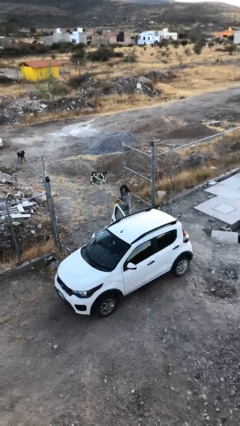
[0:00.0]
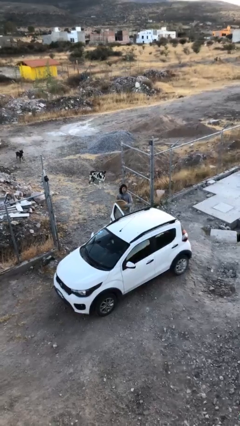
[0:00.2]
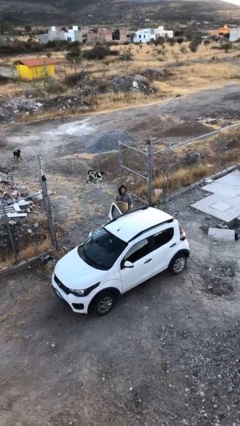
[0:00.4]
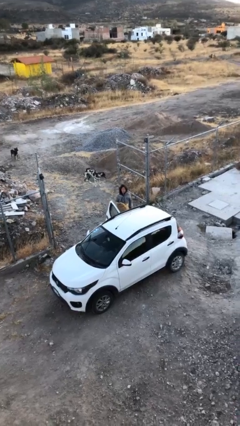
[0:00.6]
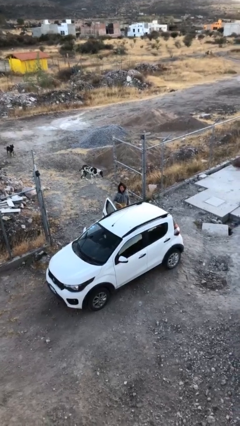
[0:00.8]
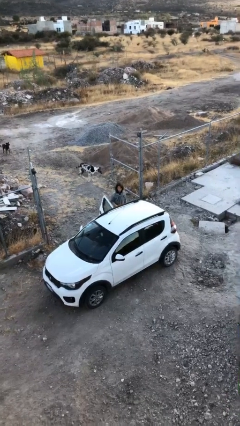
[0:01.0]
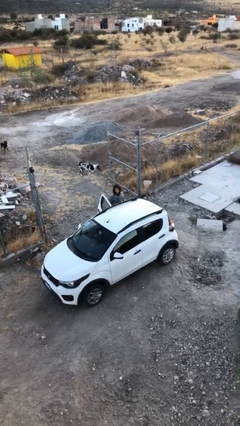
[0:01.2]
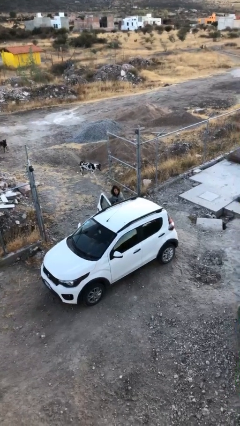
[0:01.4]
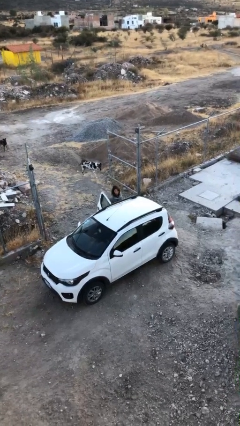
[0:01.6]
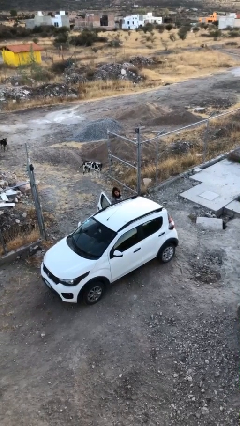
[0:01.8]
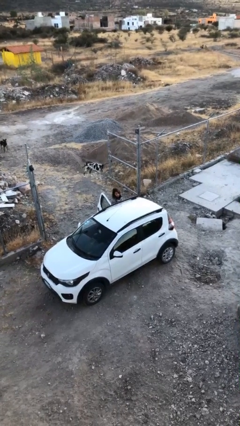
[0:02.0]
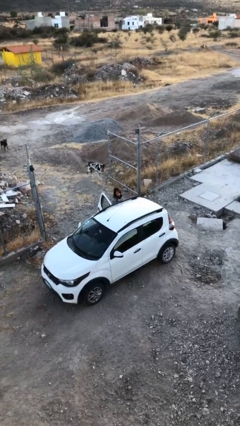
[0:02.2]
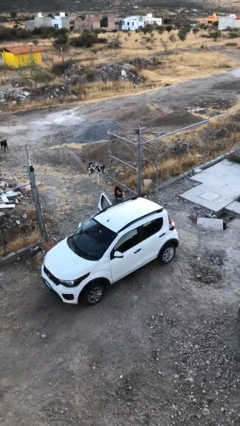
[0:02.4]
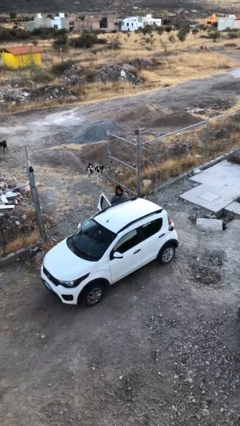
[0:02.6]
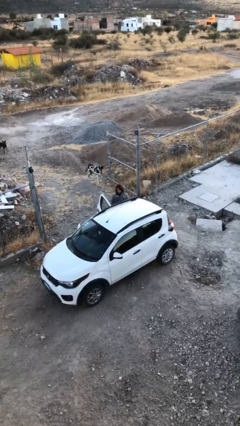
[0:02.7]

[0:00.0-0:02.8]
person loads car

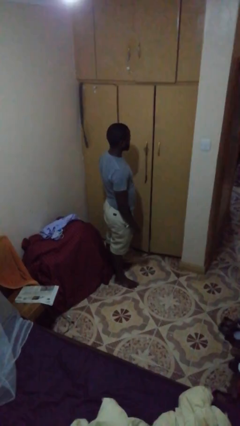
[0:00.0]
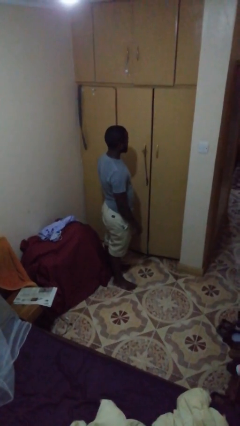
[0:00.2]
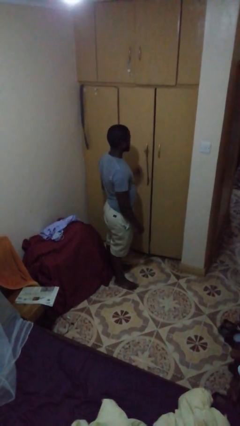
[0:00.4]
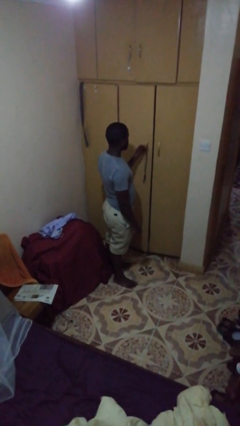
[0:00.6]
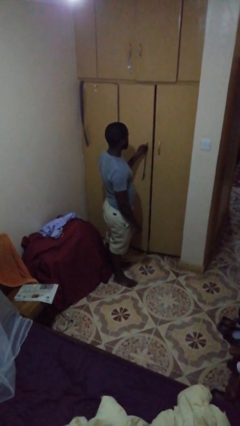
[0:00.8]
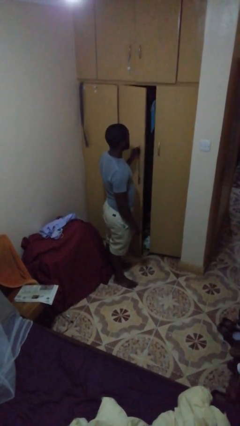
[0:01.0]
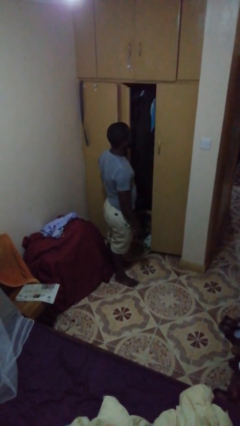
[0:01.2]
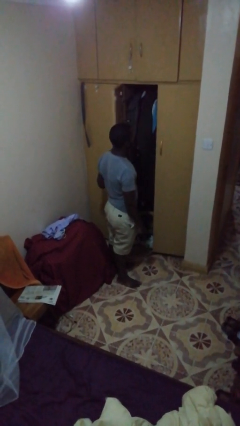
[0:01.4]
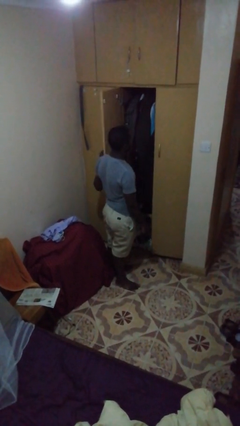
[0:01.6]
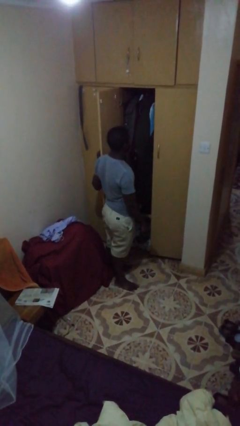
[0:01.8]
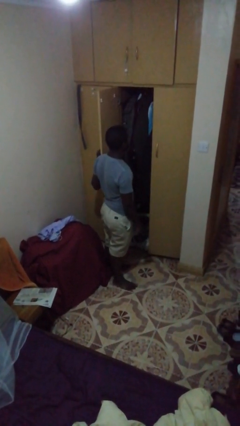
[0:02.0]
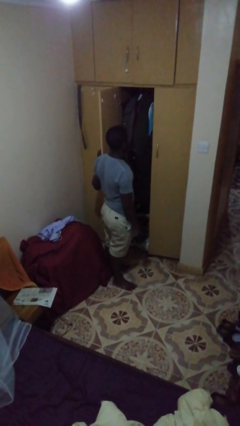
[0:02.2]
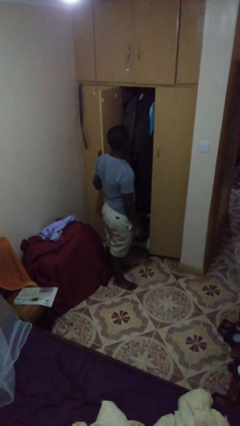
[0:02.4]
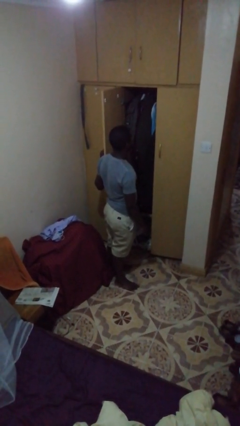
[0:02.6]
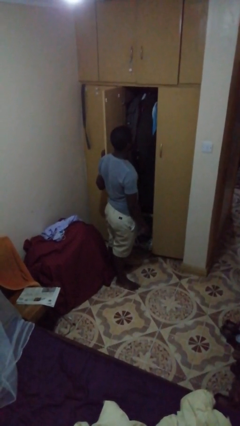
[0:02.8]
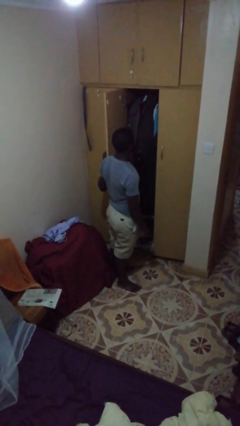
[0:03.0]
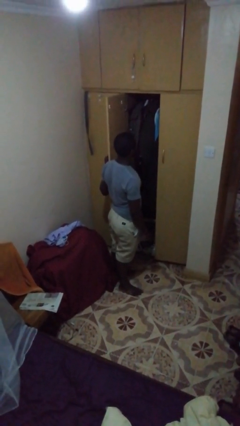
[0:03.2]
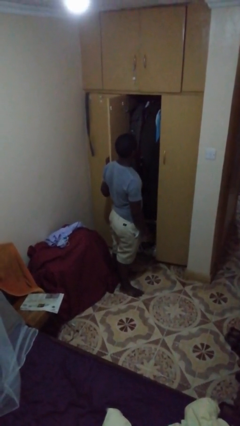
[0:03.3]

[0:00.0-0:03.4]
person opens closet door

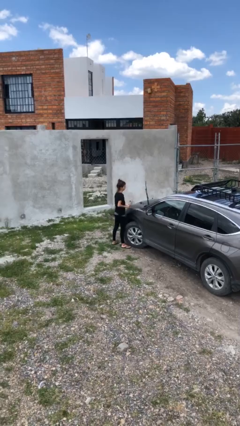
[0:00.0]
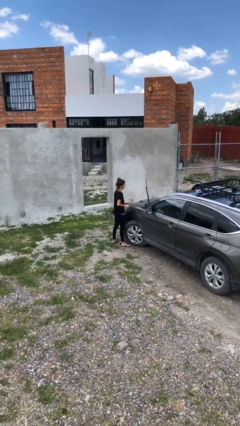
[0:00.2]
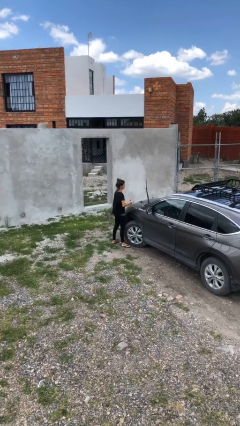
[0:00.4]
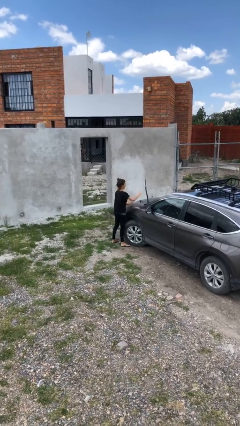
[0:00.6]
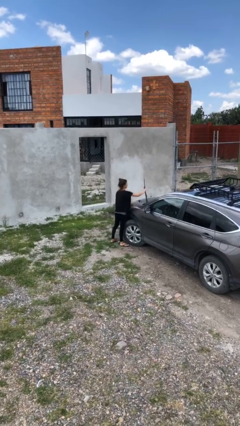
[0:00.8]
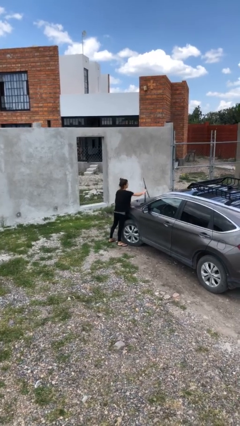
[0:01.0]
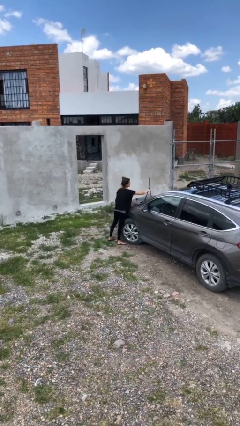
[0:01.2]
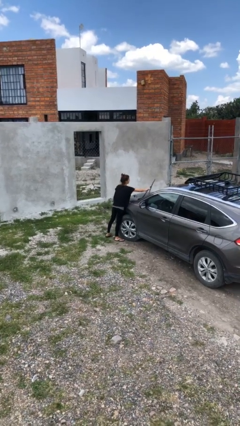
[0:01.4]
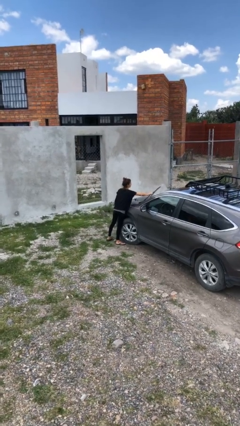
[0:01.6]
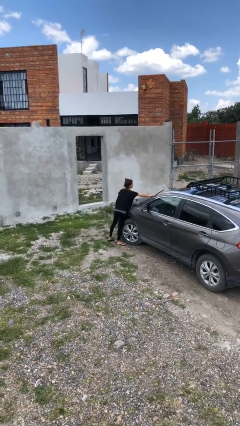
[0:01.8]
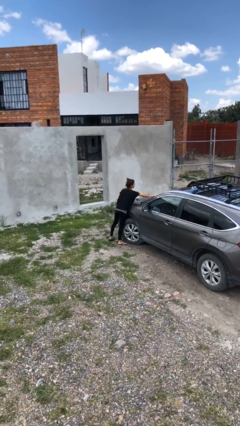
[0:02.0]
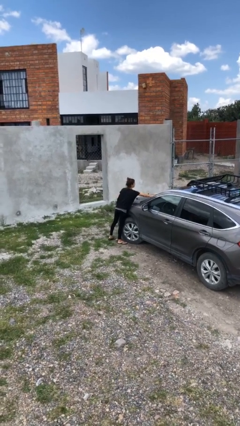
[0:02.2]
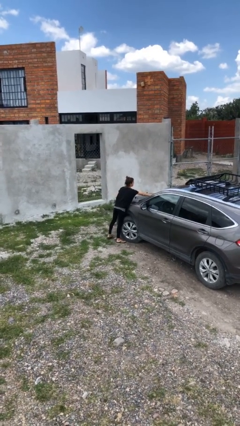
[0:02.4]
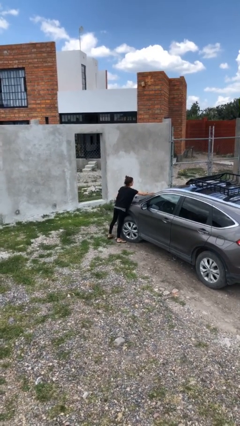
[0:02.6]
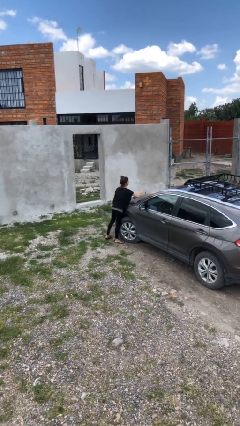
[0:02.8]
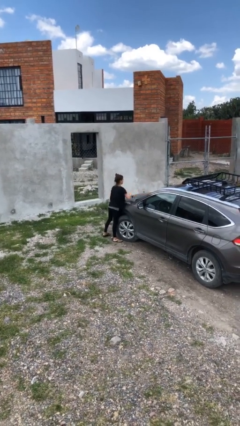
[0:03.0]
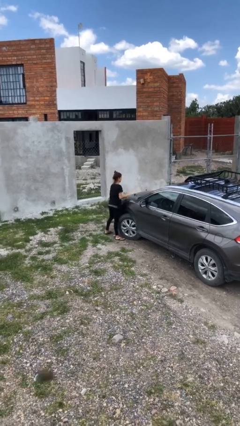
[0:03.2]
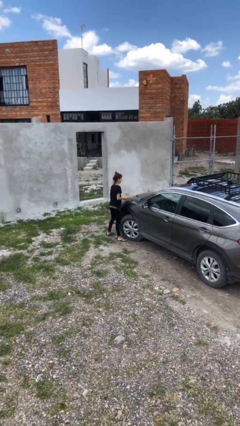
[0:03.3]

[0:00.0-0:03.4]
person flips down car wipers

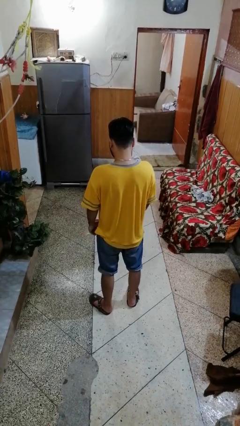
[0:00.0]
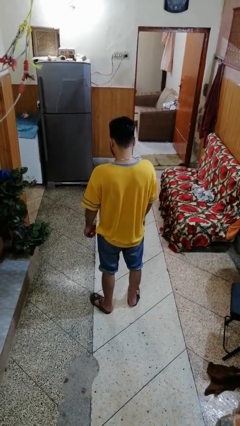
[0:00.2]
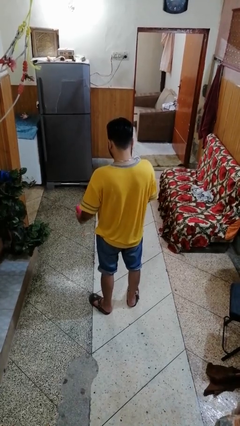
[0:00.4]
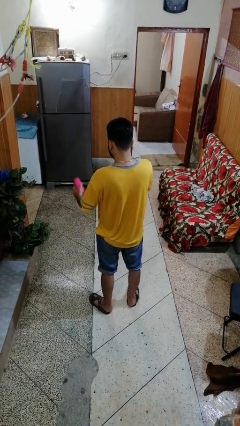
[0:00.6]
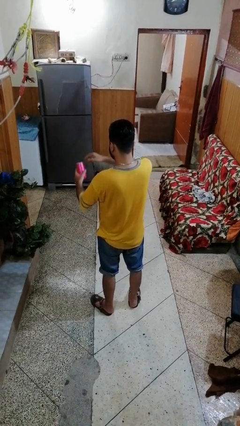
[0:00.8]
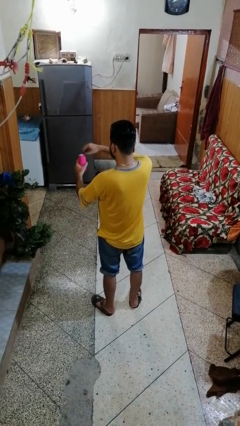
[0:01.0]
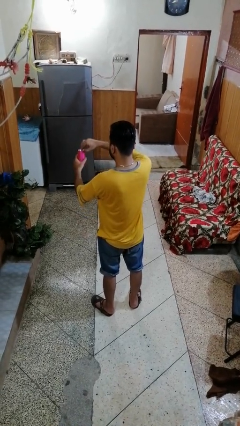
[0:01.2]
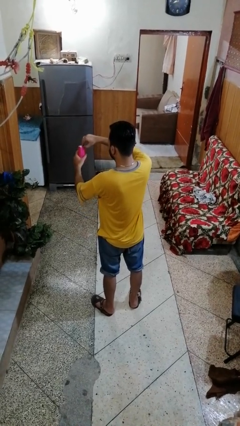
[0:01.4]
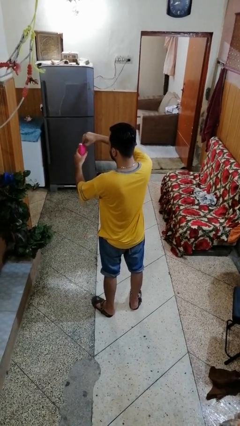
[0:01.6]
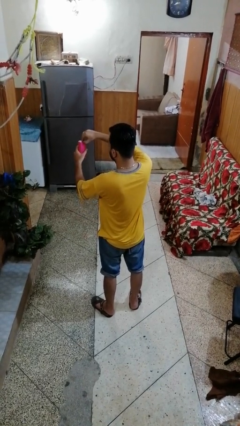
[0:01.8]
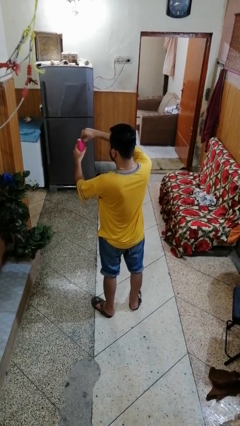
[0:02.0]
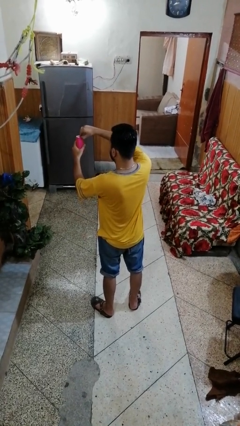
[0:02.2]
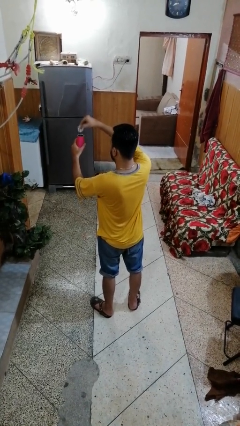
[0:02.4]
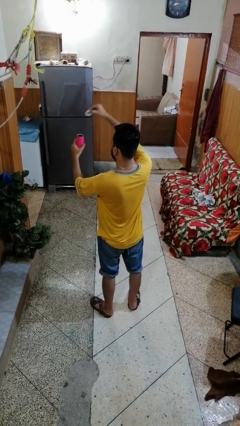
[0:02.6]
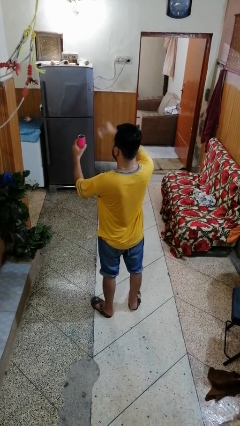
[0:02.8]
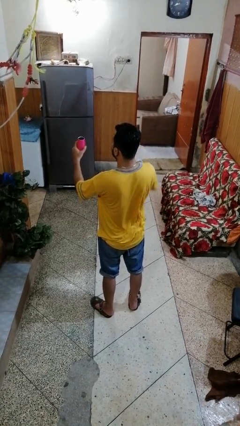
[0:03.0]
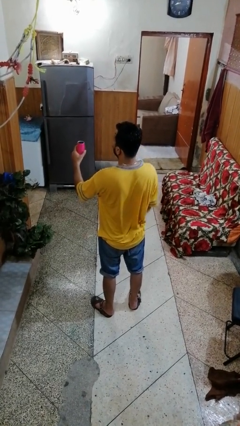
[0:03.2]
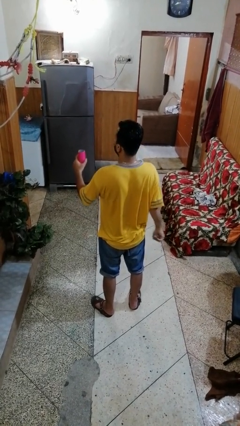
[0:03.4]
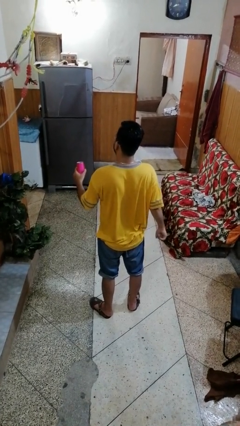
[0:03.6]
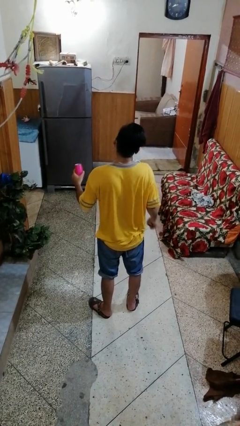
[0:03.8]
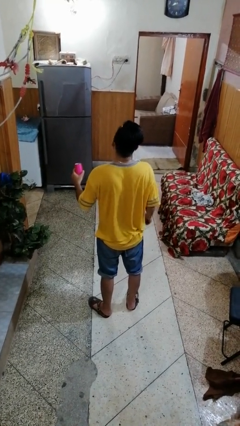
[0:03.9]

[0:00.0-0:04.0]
person opens beverage can

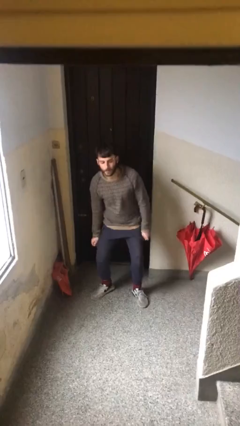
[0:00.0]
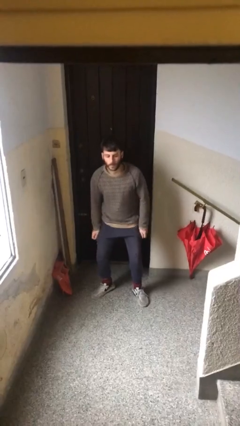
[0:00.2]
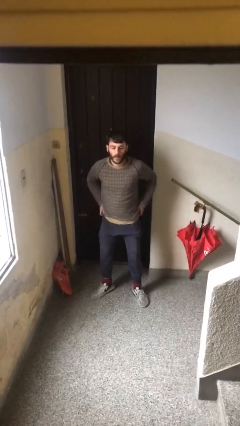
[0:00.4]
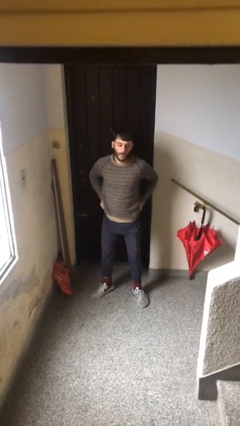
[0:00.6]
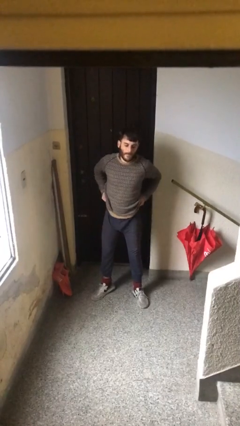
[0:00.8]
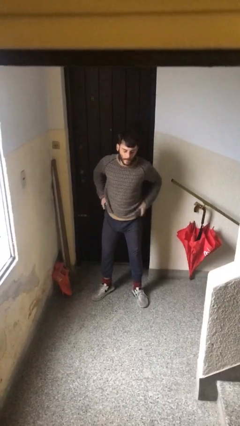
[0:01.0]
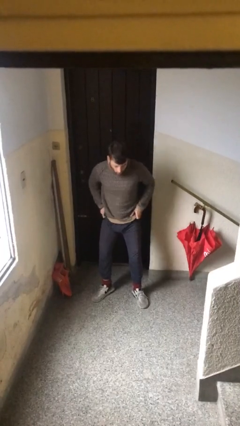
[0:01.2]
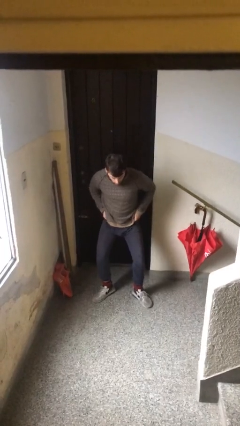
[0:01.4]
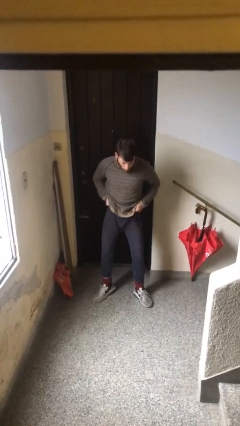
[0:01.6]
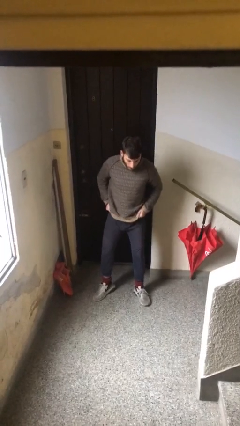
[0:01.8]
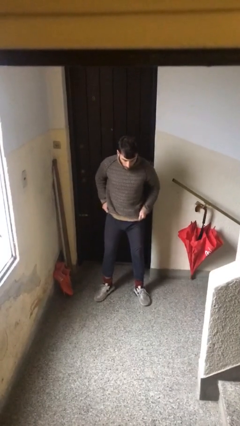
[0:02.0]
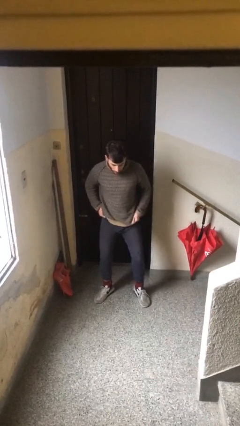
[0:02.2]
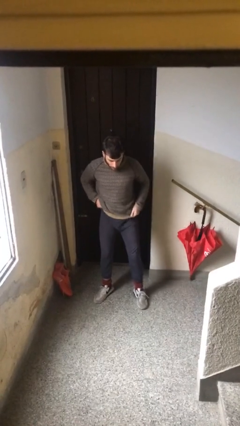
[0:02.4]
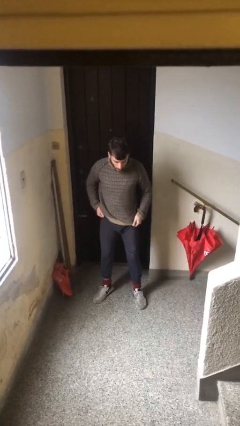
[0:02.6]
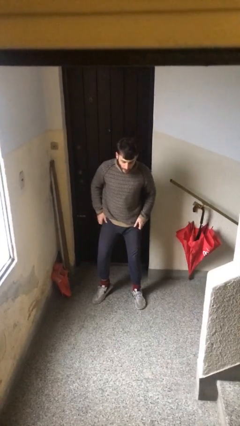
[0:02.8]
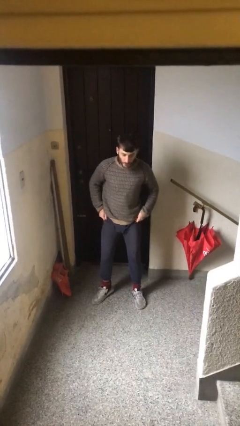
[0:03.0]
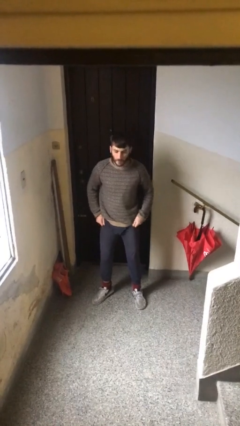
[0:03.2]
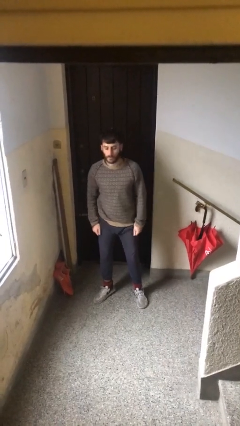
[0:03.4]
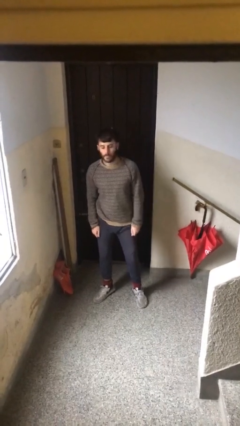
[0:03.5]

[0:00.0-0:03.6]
person hikes up pants
